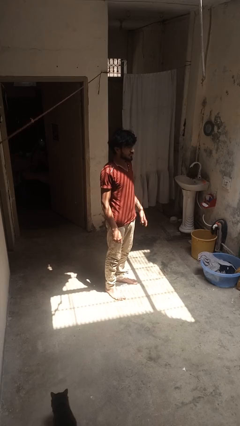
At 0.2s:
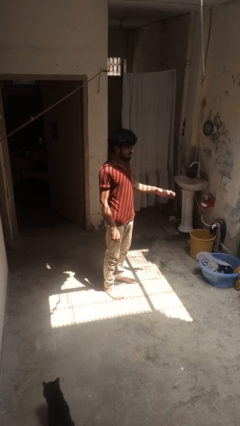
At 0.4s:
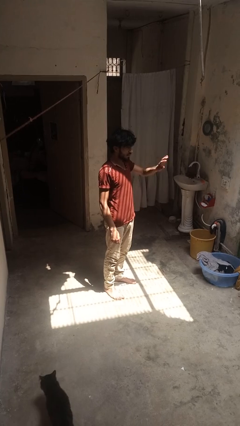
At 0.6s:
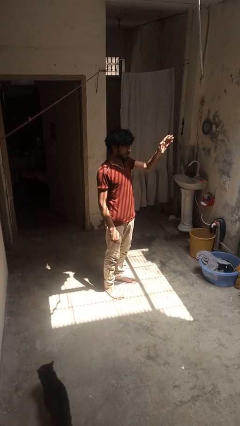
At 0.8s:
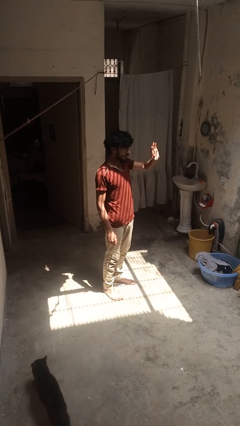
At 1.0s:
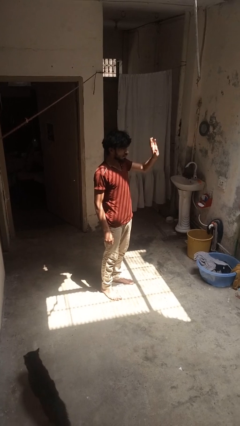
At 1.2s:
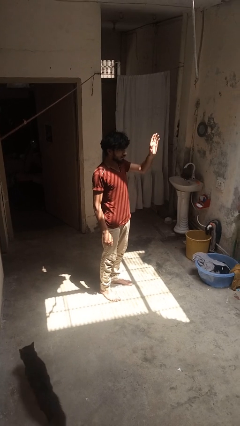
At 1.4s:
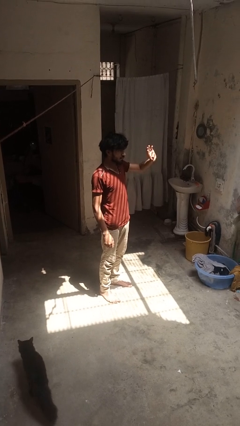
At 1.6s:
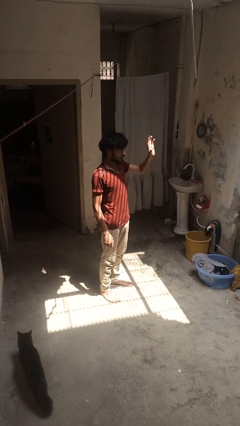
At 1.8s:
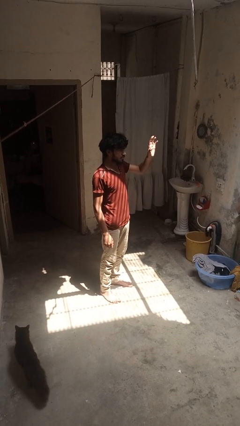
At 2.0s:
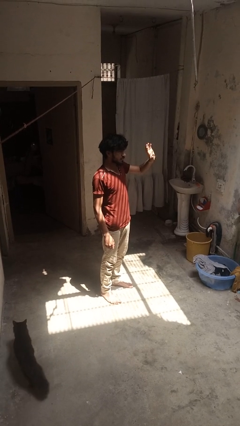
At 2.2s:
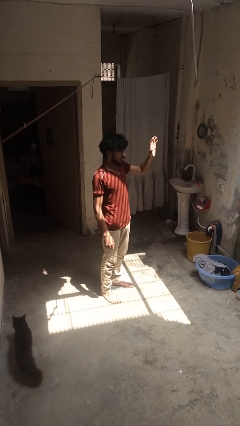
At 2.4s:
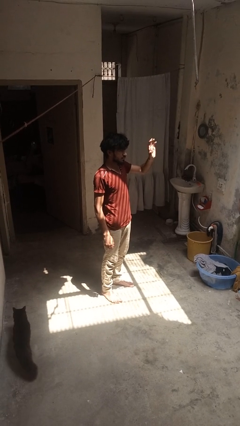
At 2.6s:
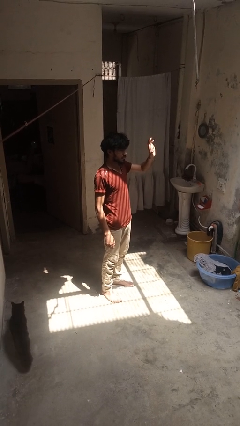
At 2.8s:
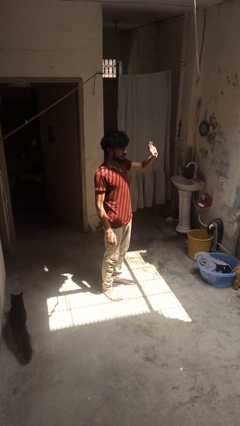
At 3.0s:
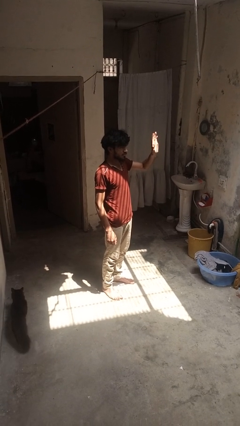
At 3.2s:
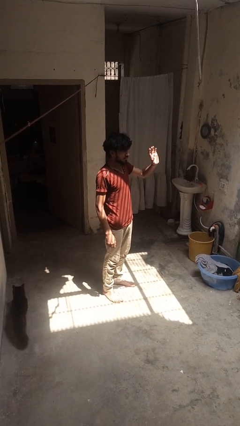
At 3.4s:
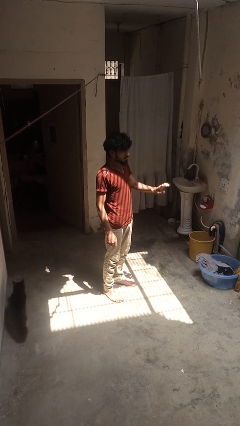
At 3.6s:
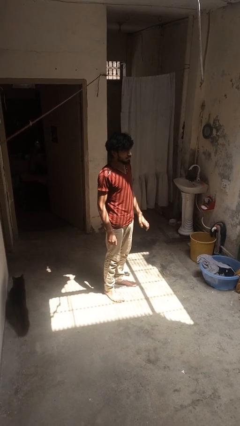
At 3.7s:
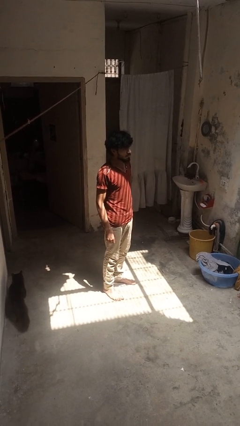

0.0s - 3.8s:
person waves at person

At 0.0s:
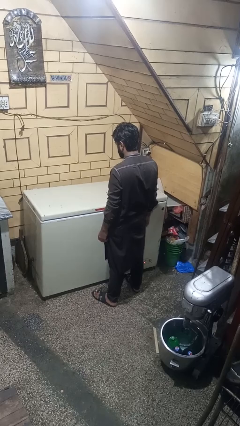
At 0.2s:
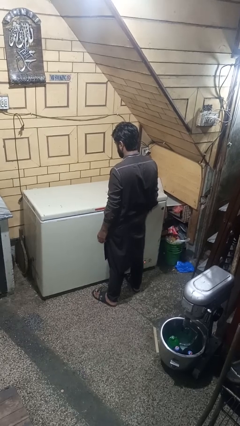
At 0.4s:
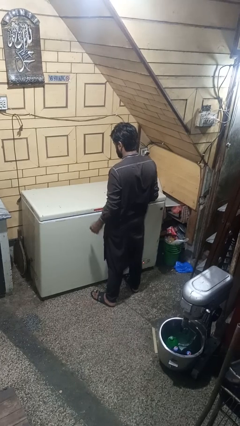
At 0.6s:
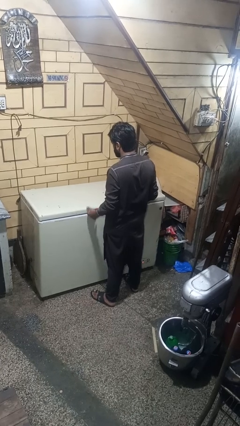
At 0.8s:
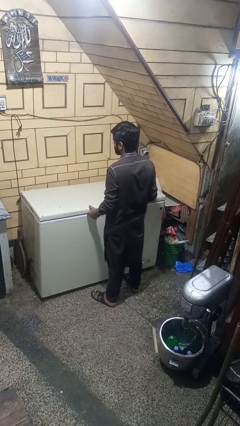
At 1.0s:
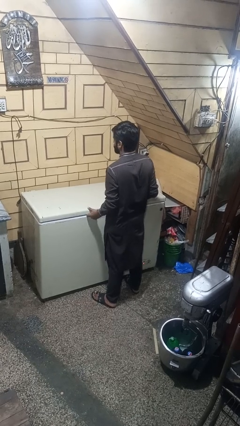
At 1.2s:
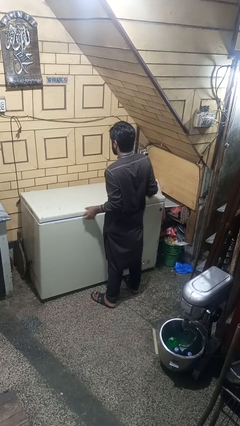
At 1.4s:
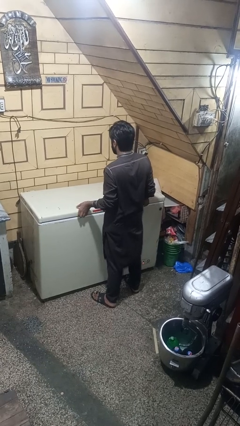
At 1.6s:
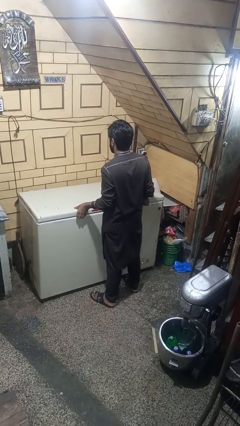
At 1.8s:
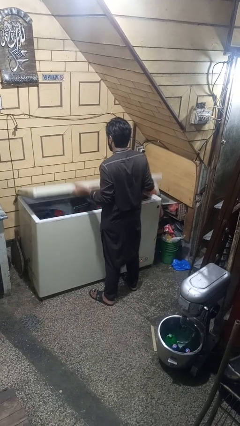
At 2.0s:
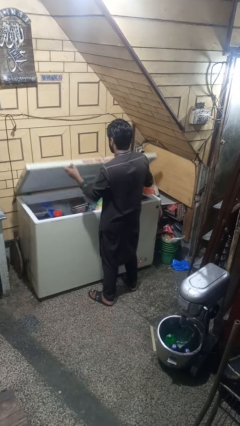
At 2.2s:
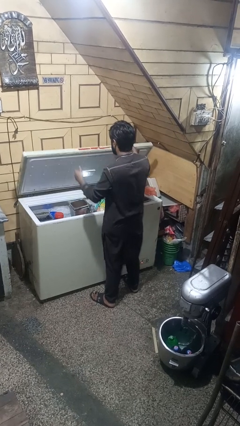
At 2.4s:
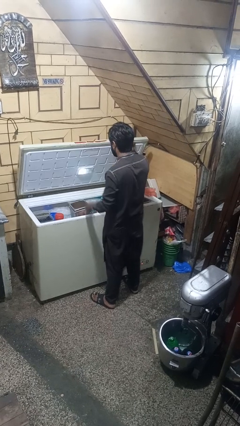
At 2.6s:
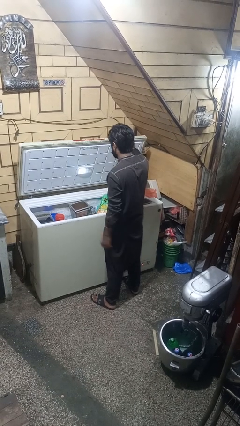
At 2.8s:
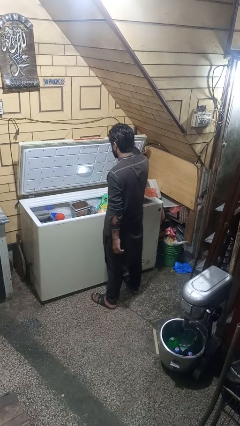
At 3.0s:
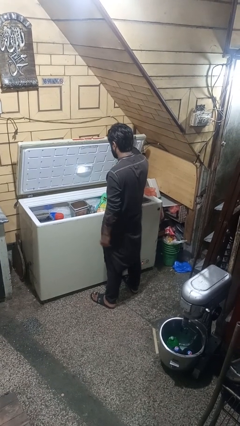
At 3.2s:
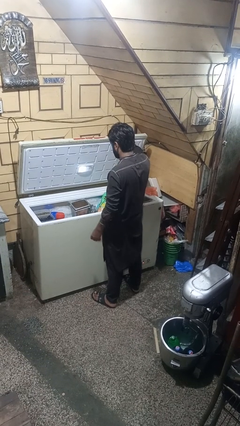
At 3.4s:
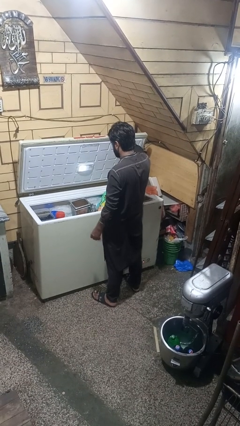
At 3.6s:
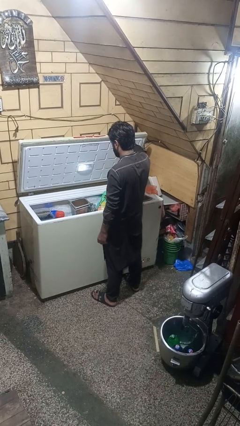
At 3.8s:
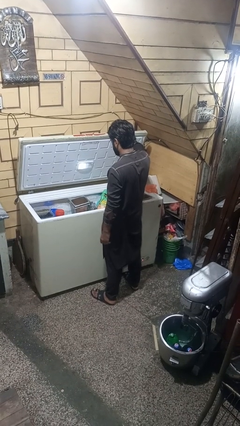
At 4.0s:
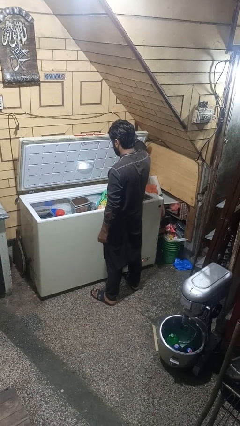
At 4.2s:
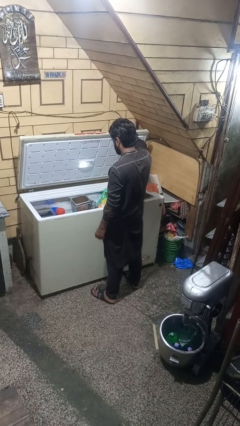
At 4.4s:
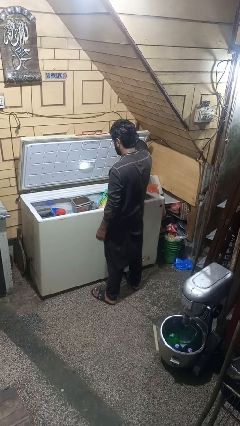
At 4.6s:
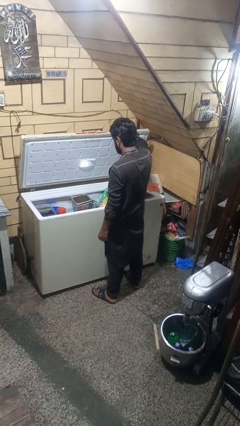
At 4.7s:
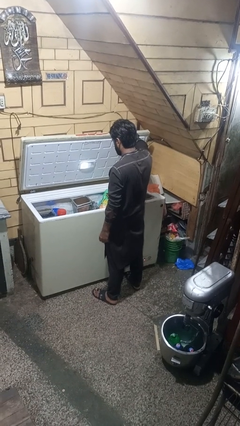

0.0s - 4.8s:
person opens refrigerator

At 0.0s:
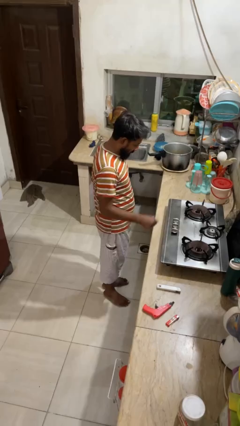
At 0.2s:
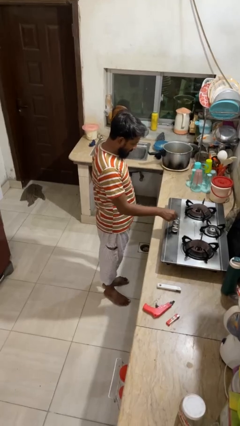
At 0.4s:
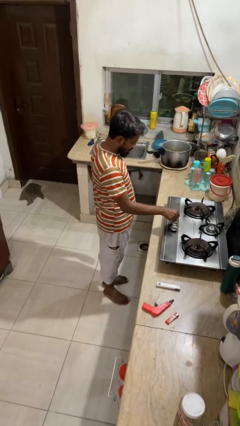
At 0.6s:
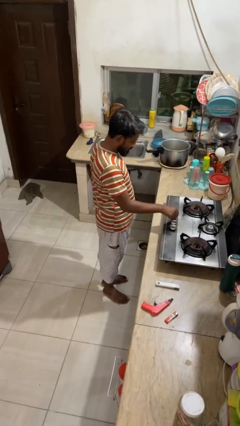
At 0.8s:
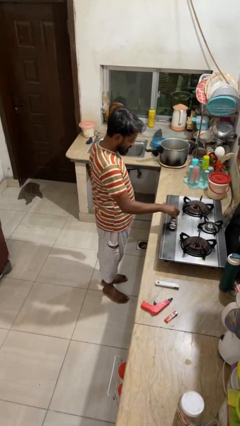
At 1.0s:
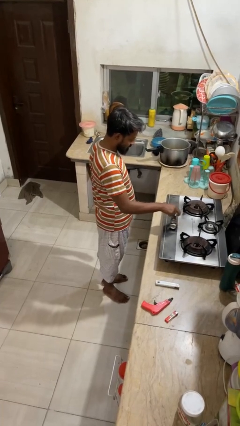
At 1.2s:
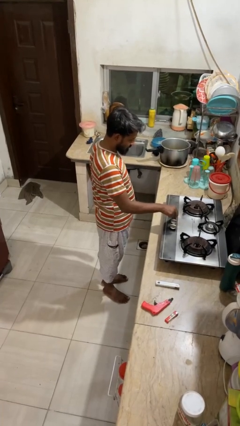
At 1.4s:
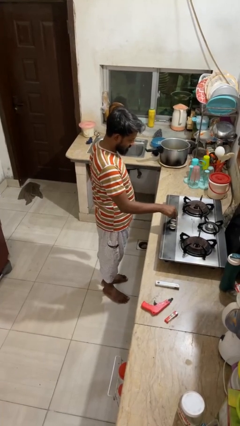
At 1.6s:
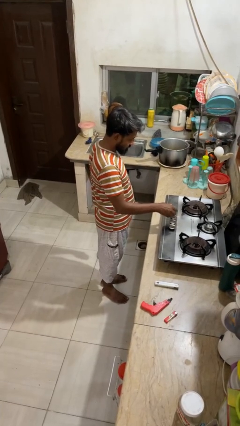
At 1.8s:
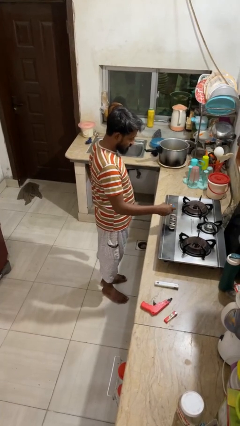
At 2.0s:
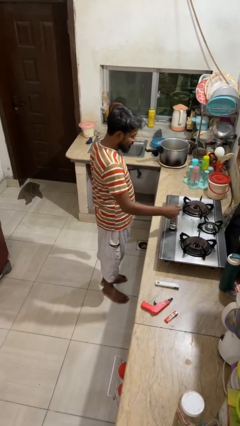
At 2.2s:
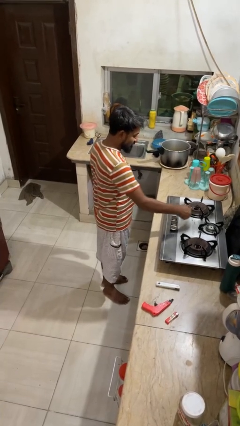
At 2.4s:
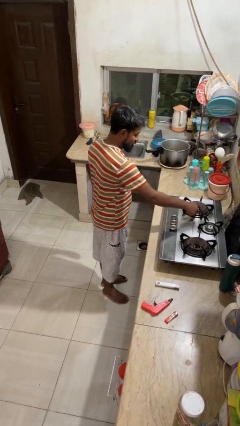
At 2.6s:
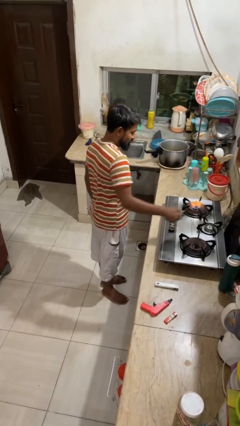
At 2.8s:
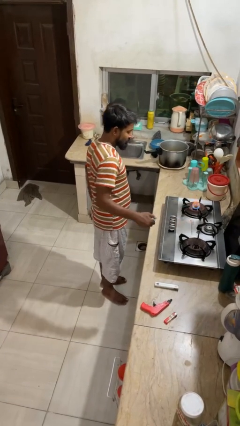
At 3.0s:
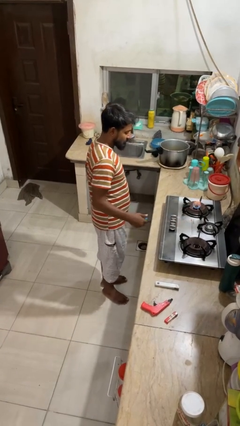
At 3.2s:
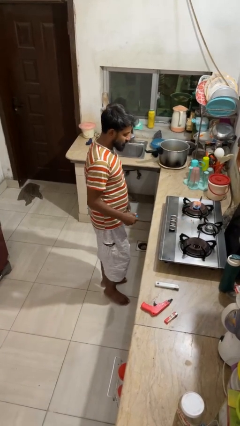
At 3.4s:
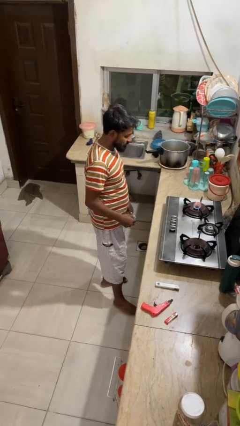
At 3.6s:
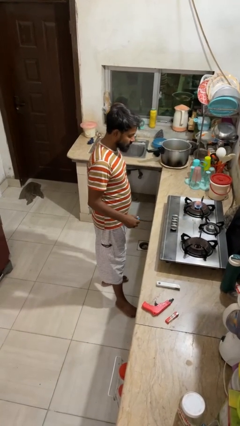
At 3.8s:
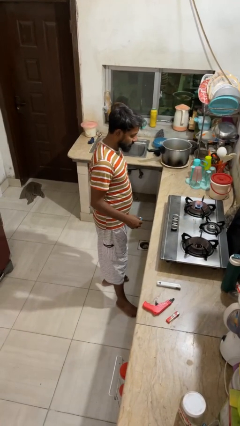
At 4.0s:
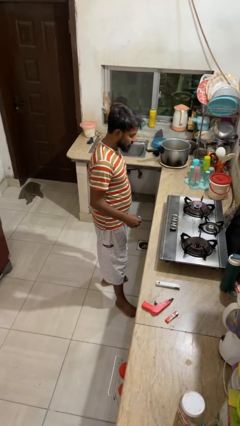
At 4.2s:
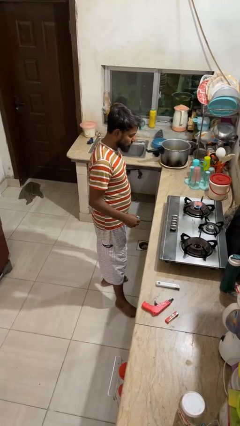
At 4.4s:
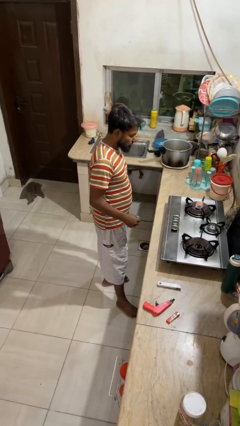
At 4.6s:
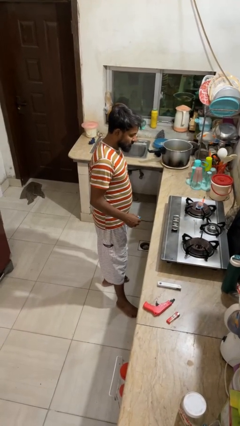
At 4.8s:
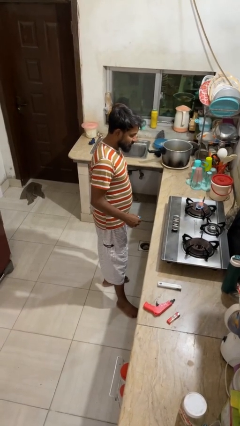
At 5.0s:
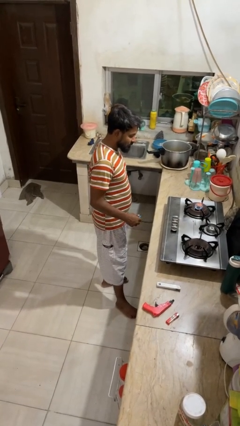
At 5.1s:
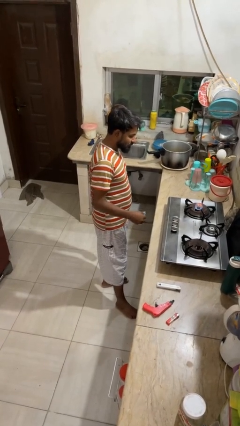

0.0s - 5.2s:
person turns on stovetop

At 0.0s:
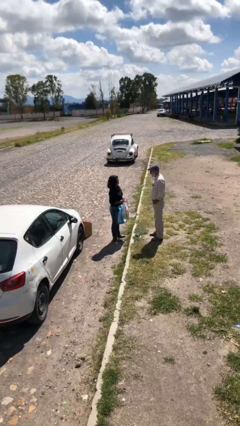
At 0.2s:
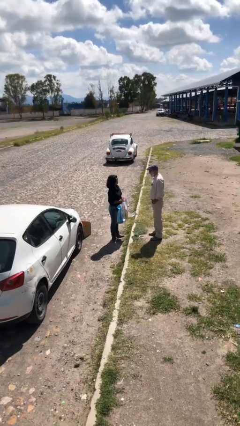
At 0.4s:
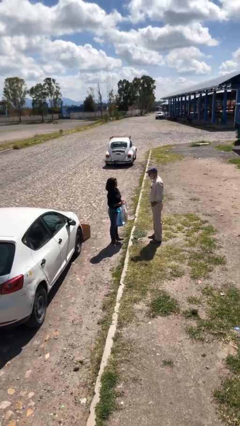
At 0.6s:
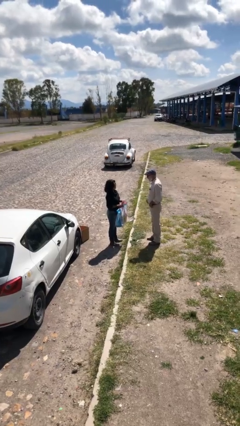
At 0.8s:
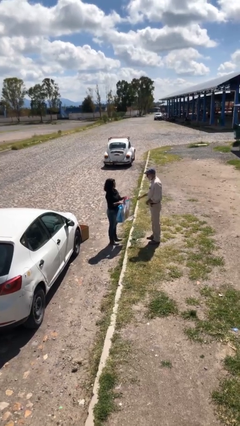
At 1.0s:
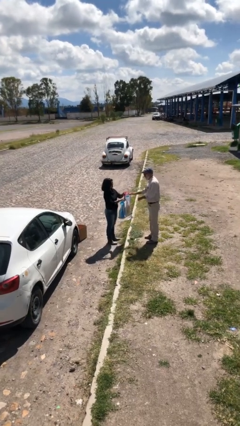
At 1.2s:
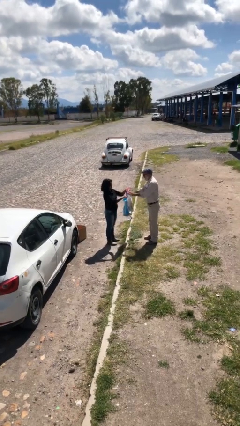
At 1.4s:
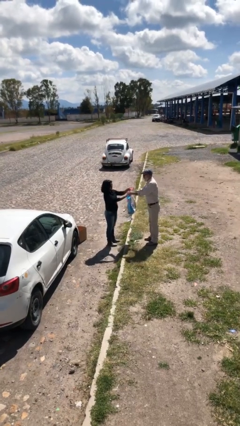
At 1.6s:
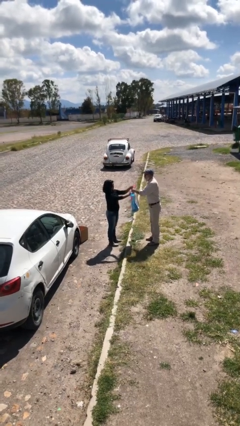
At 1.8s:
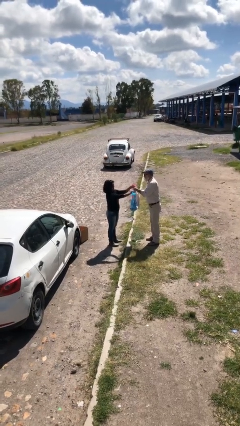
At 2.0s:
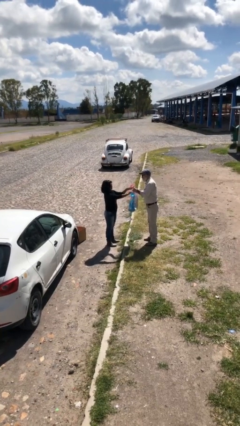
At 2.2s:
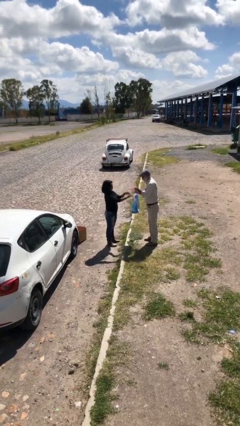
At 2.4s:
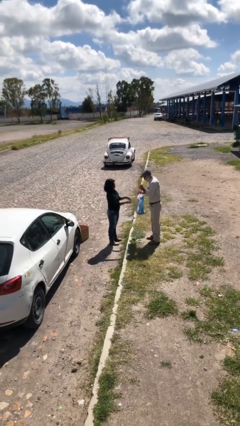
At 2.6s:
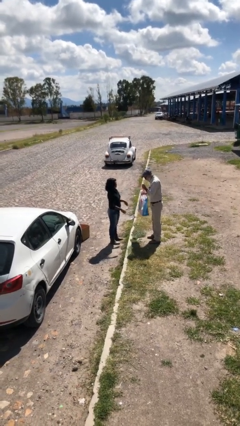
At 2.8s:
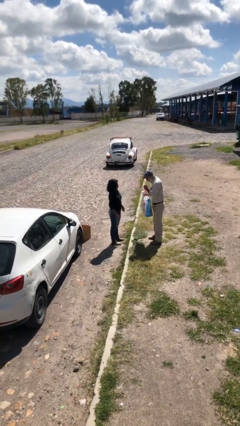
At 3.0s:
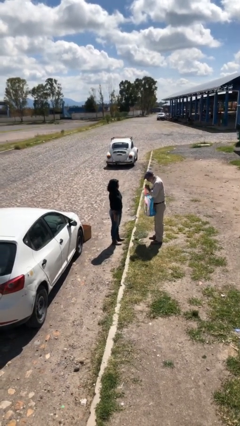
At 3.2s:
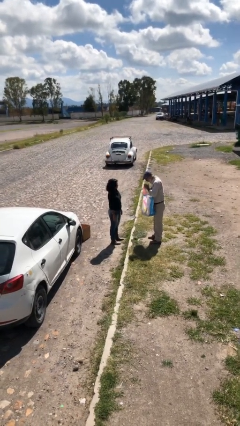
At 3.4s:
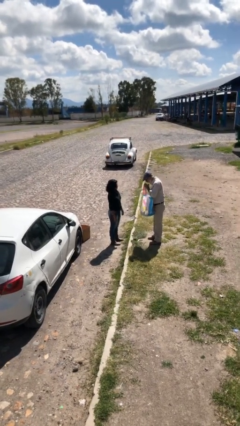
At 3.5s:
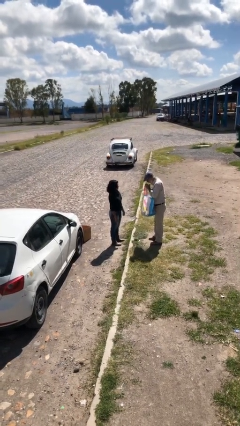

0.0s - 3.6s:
person transfers object to person
